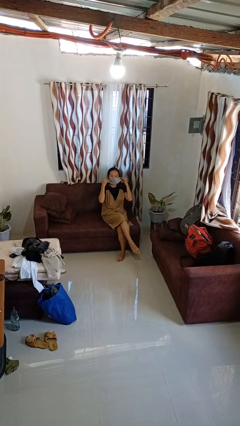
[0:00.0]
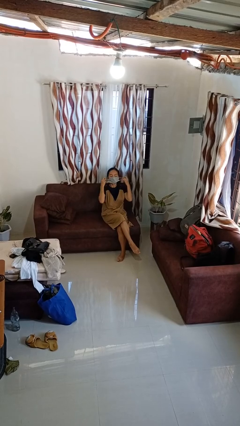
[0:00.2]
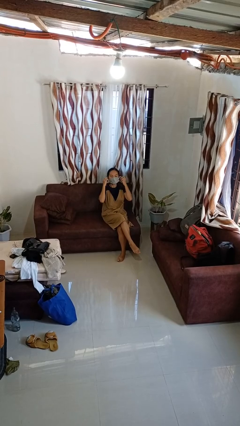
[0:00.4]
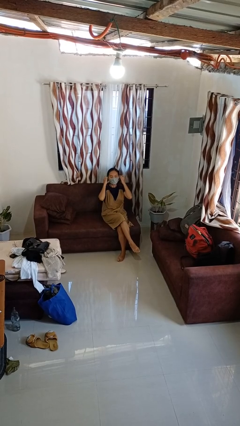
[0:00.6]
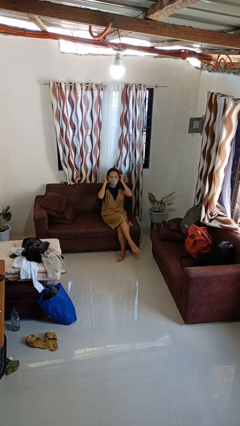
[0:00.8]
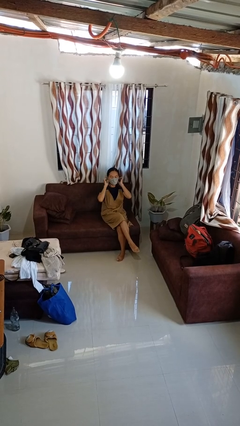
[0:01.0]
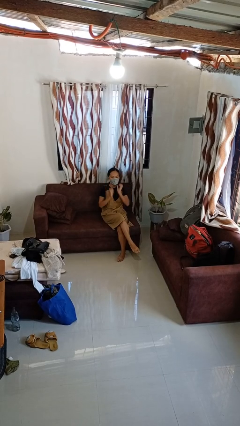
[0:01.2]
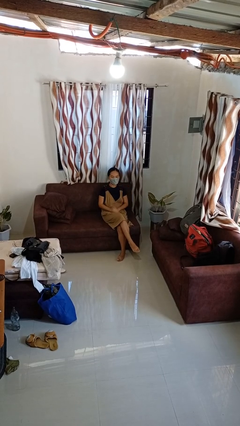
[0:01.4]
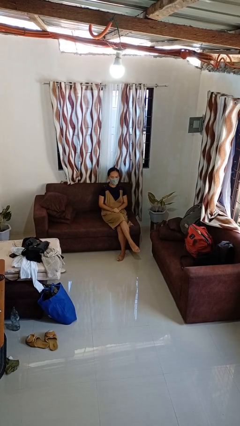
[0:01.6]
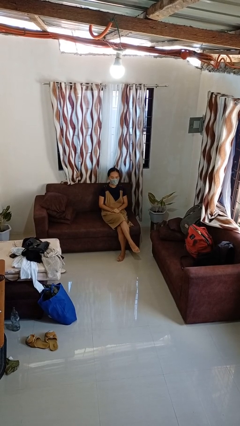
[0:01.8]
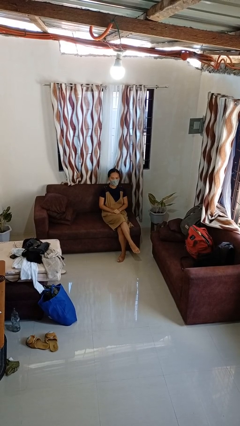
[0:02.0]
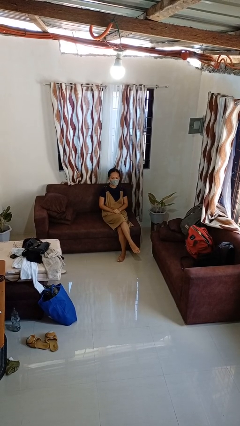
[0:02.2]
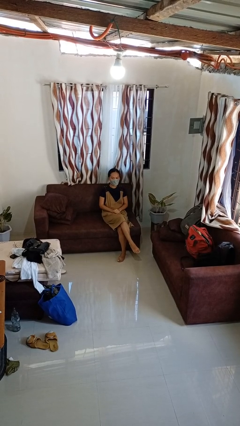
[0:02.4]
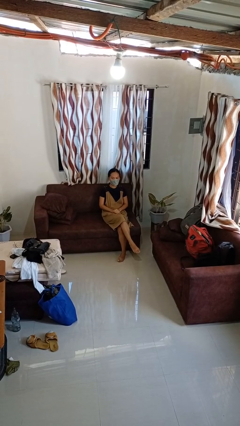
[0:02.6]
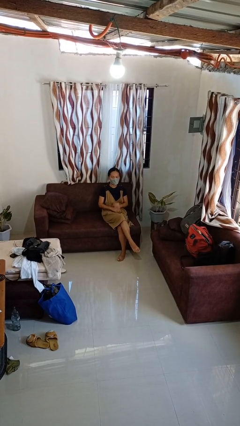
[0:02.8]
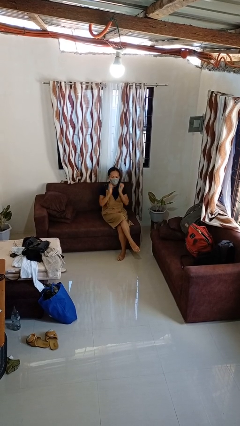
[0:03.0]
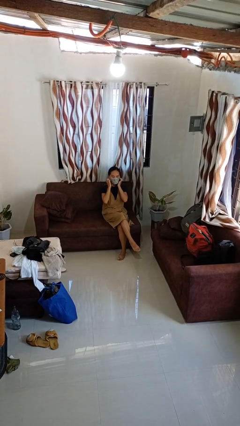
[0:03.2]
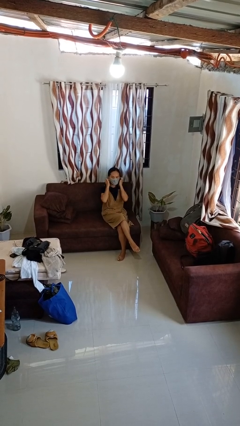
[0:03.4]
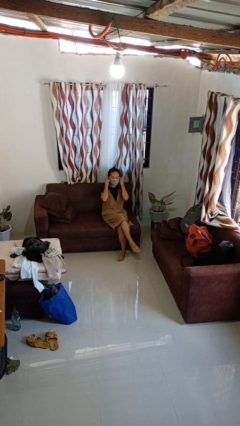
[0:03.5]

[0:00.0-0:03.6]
person puts on facemask

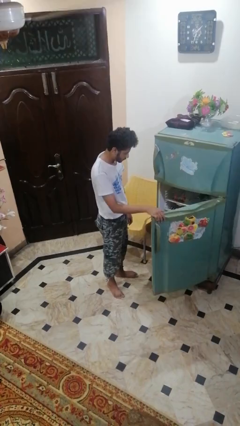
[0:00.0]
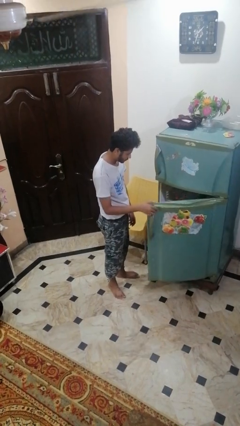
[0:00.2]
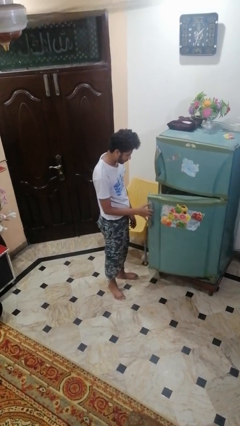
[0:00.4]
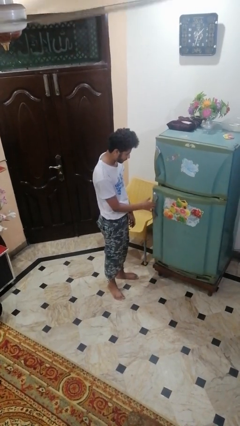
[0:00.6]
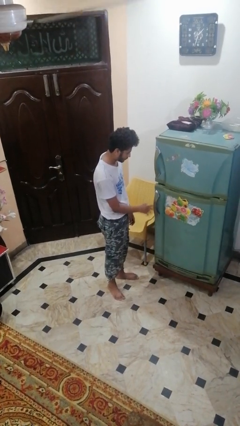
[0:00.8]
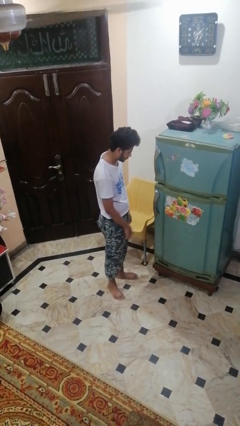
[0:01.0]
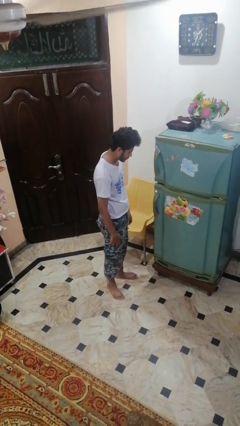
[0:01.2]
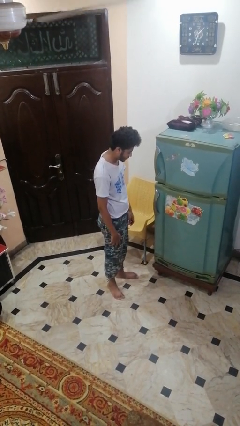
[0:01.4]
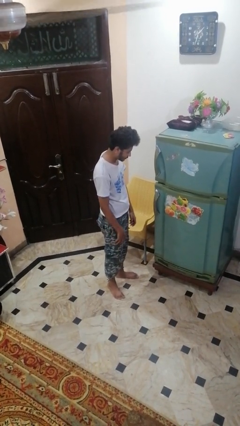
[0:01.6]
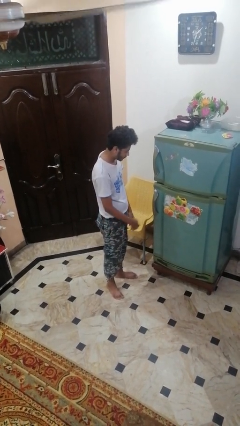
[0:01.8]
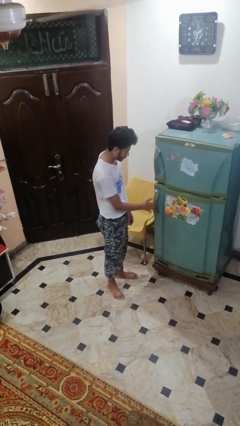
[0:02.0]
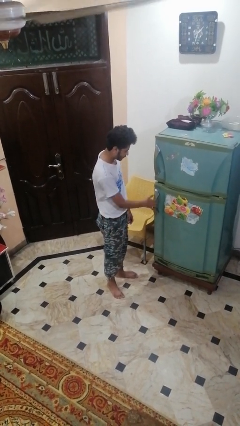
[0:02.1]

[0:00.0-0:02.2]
person closes refrigerator

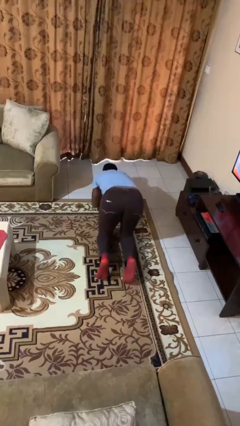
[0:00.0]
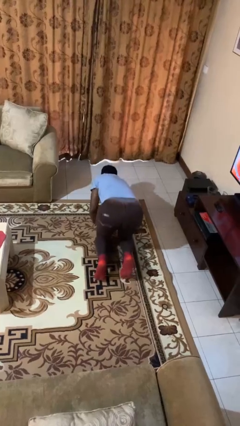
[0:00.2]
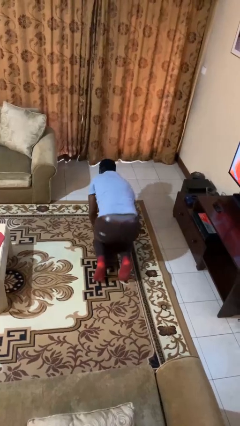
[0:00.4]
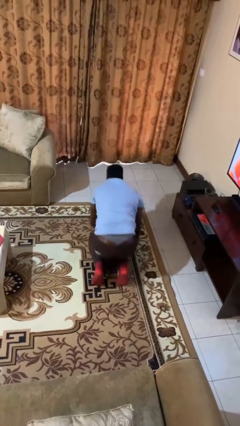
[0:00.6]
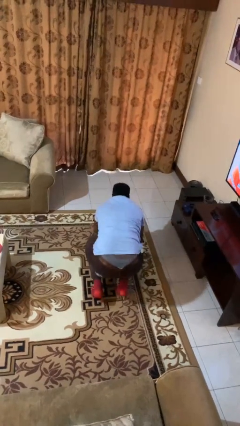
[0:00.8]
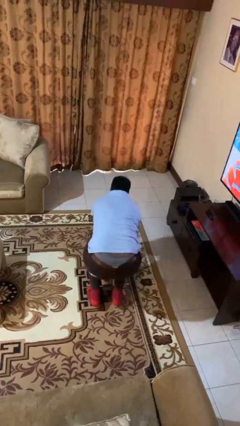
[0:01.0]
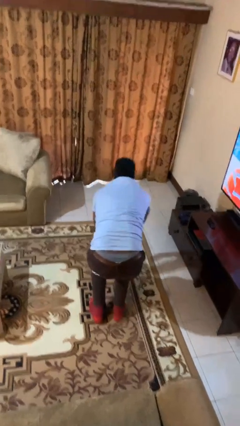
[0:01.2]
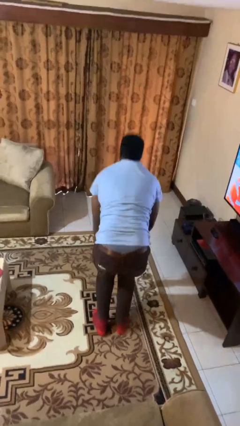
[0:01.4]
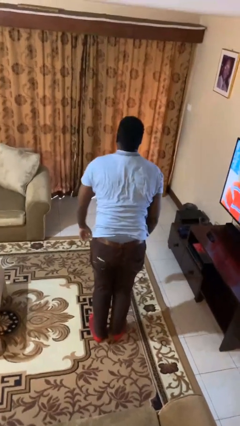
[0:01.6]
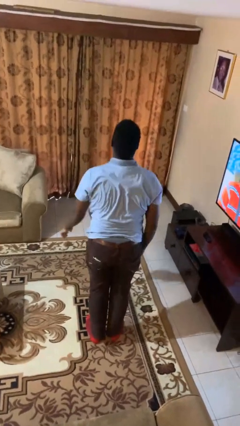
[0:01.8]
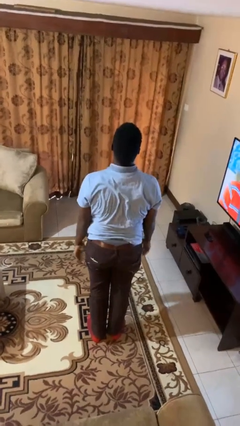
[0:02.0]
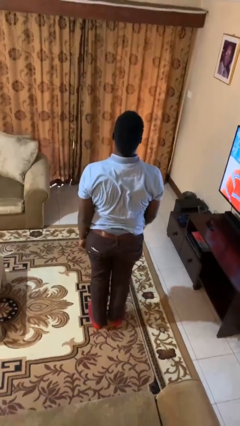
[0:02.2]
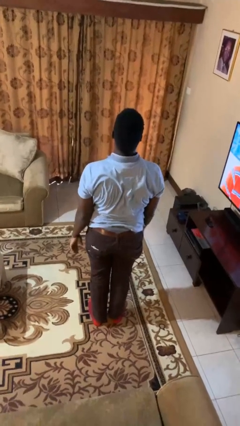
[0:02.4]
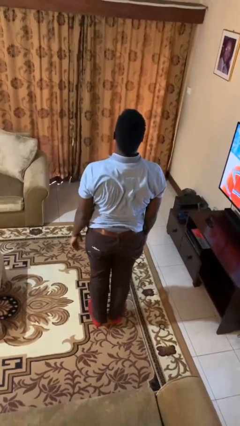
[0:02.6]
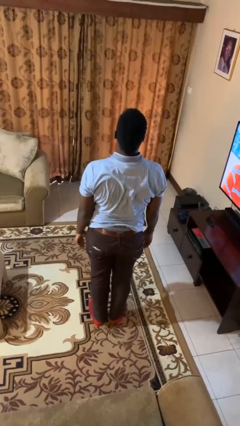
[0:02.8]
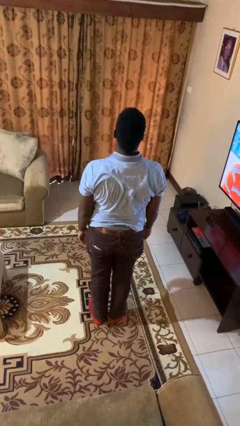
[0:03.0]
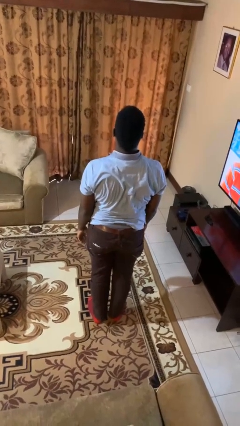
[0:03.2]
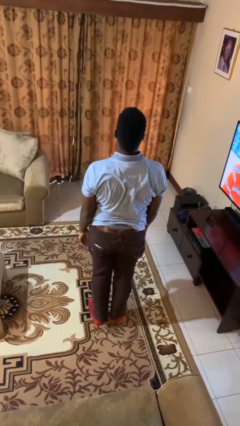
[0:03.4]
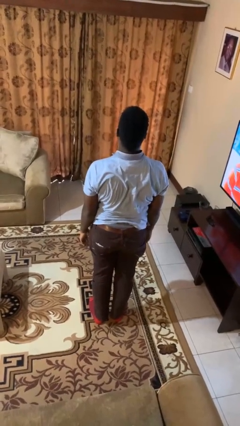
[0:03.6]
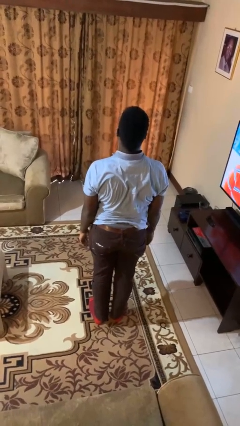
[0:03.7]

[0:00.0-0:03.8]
person stands up from floor

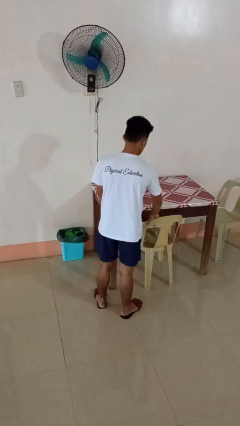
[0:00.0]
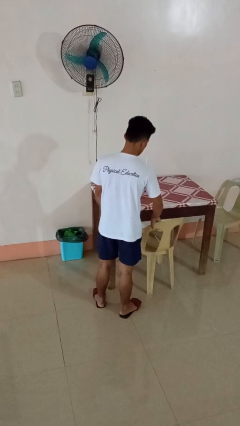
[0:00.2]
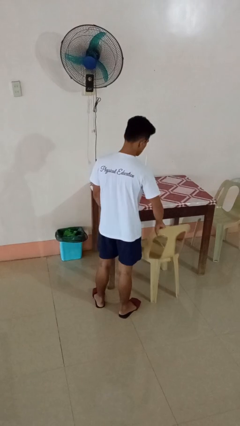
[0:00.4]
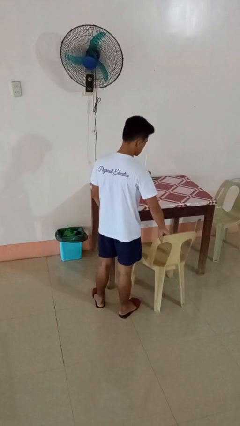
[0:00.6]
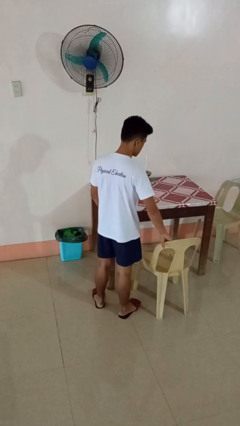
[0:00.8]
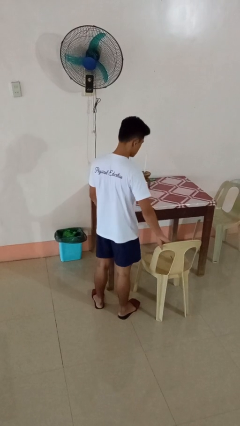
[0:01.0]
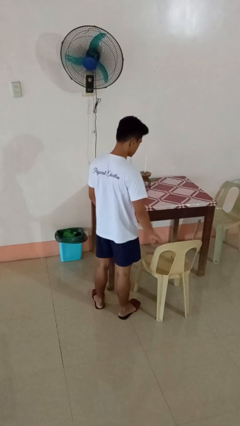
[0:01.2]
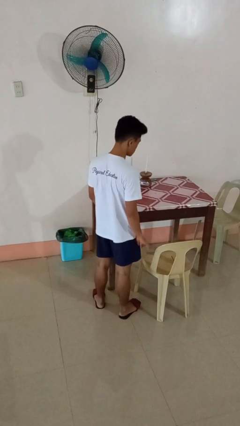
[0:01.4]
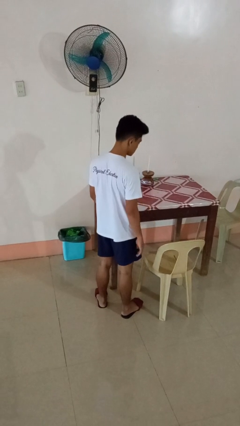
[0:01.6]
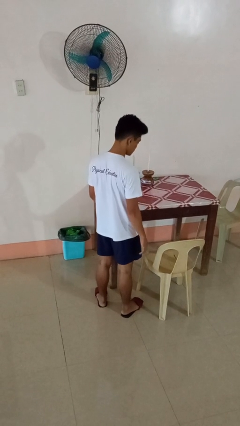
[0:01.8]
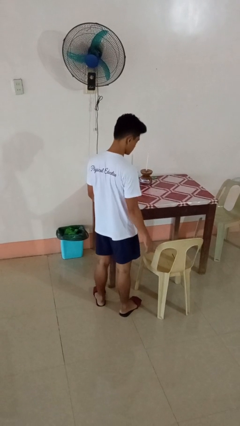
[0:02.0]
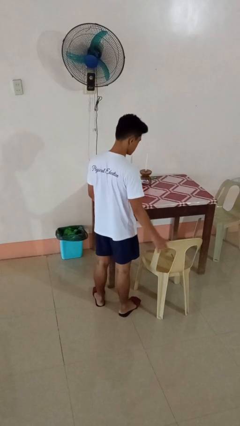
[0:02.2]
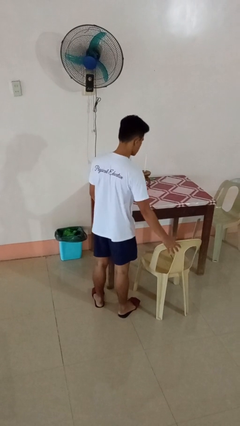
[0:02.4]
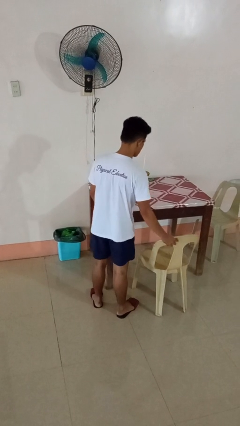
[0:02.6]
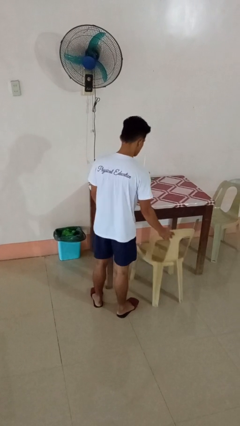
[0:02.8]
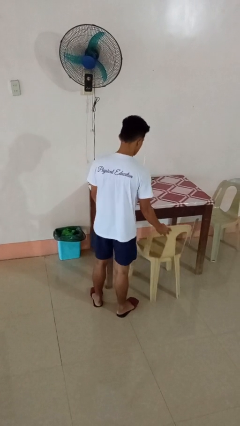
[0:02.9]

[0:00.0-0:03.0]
person pulls out chair

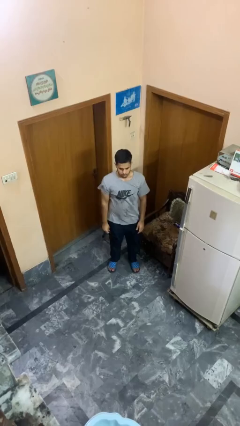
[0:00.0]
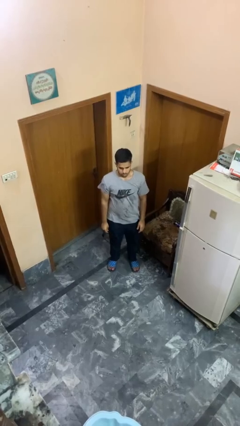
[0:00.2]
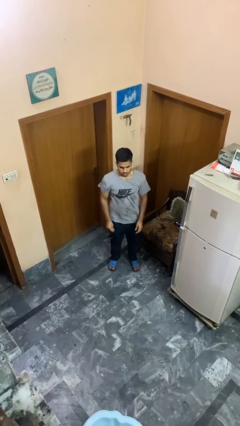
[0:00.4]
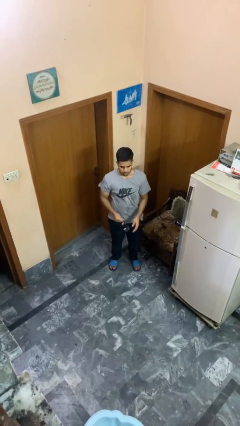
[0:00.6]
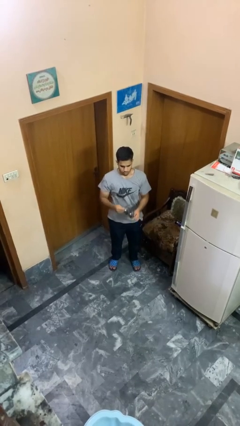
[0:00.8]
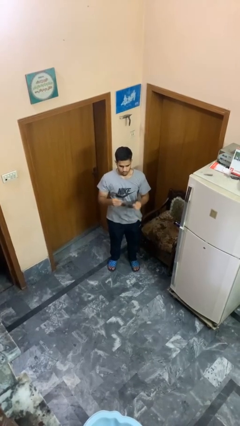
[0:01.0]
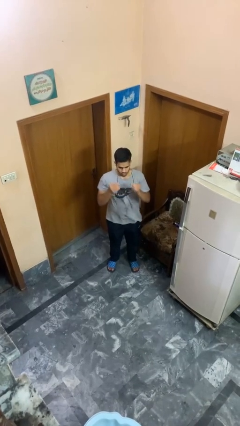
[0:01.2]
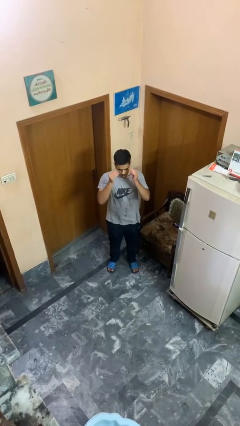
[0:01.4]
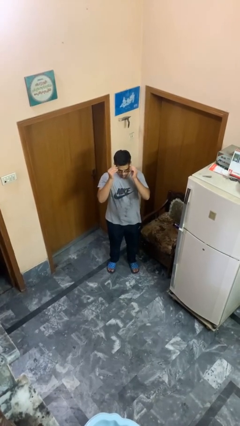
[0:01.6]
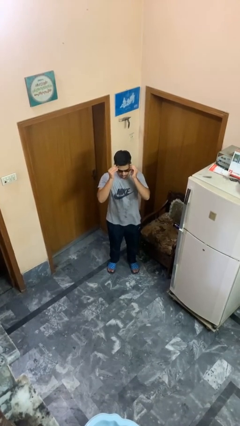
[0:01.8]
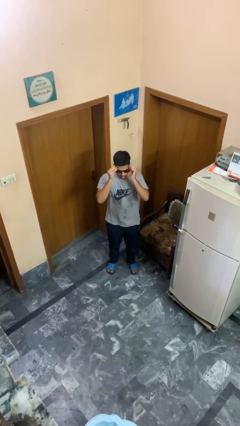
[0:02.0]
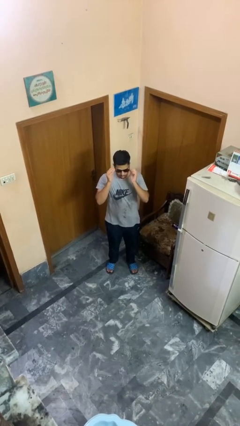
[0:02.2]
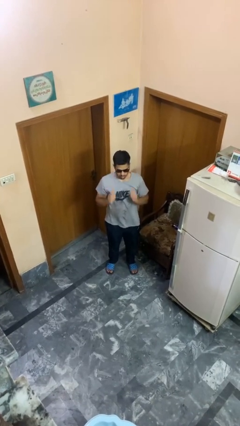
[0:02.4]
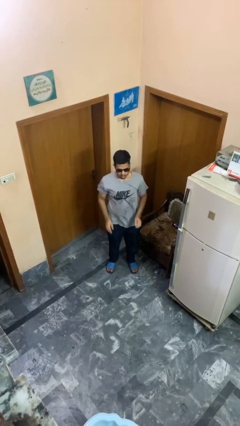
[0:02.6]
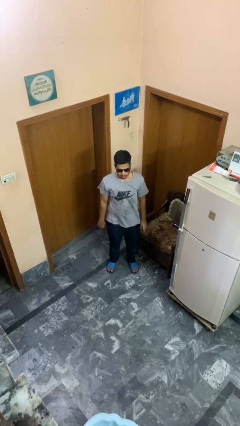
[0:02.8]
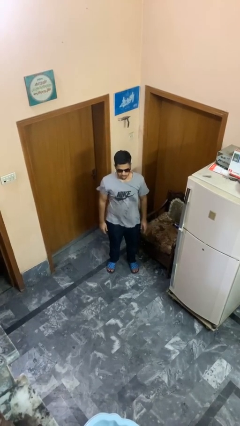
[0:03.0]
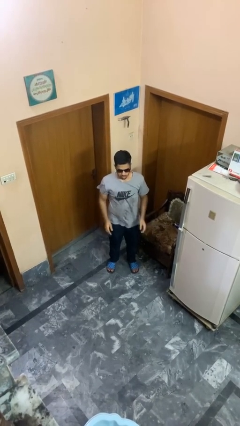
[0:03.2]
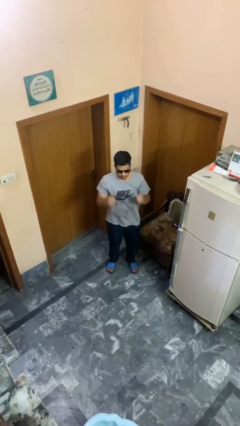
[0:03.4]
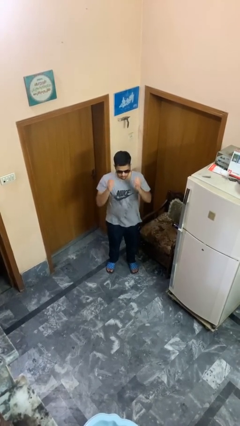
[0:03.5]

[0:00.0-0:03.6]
person puts on sunglasses

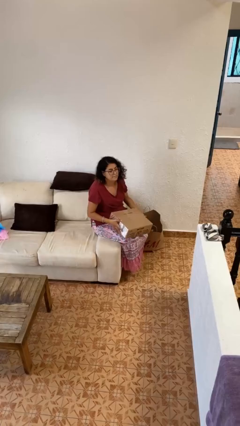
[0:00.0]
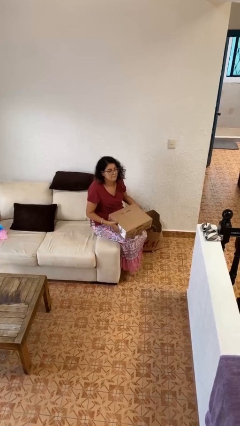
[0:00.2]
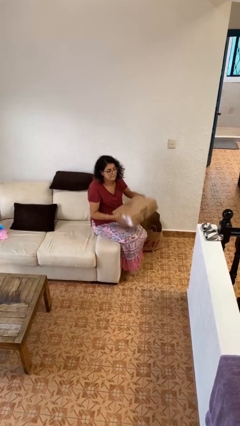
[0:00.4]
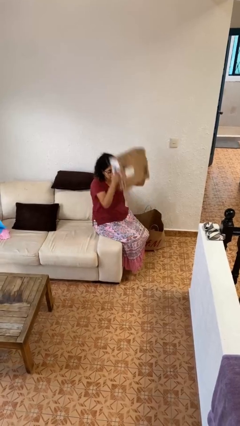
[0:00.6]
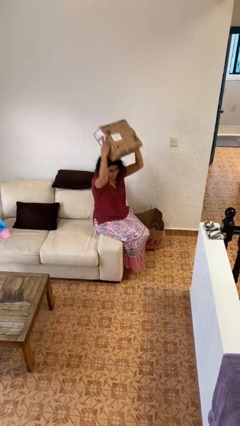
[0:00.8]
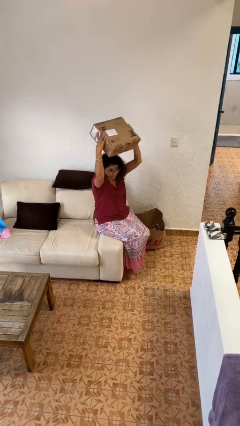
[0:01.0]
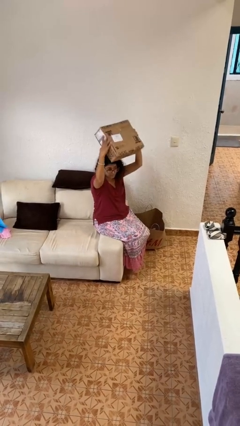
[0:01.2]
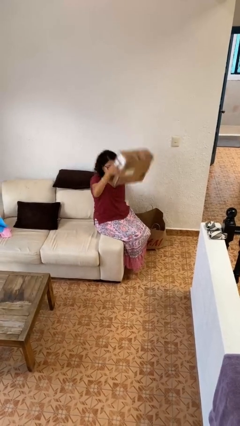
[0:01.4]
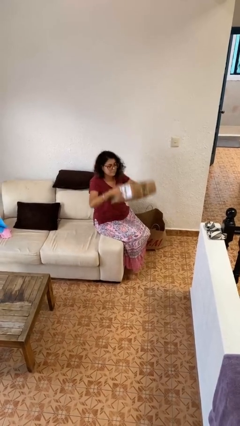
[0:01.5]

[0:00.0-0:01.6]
person holds object above head
